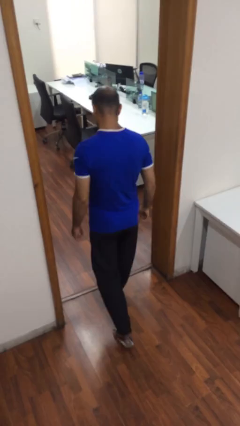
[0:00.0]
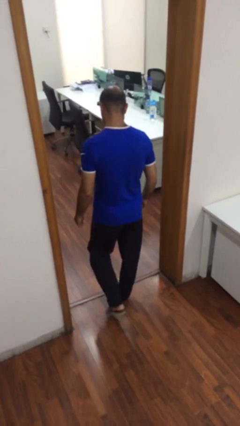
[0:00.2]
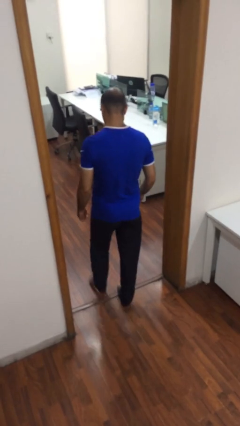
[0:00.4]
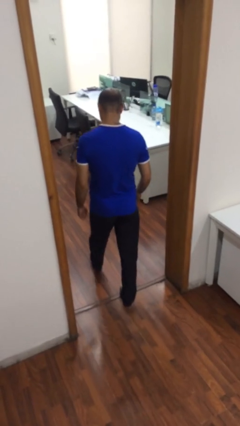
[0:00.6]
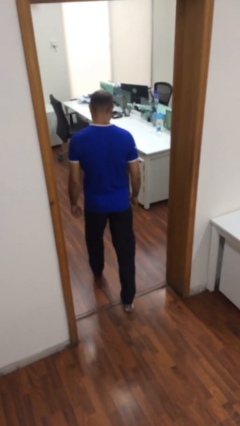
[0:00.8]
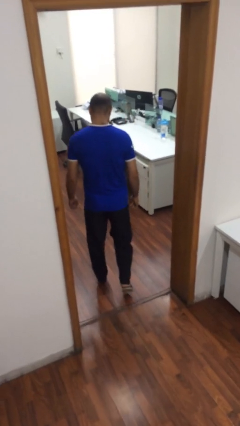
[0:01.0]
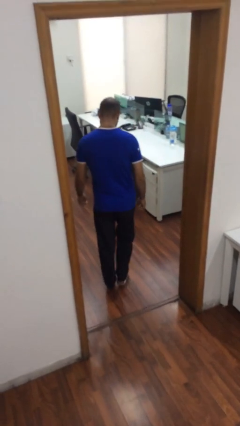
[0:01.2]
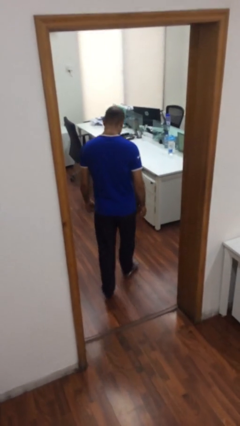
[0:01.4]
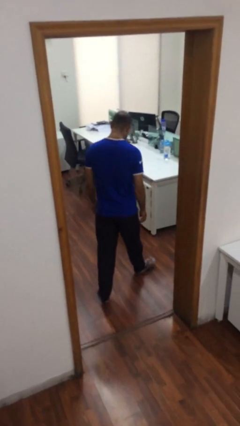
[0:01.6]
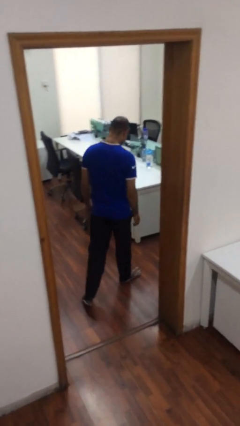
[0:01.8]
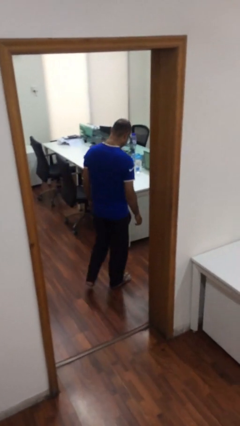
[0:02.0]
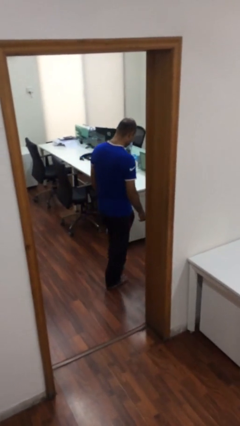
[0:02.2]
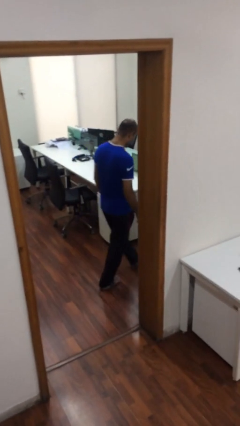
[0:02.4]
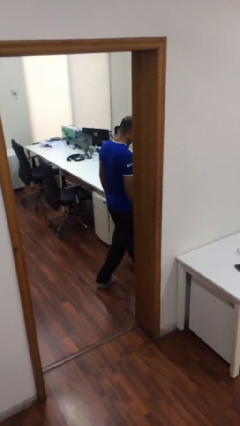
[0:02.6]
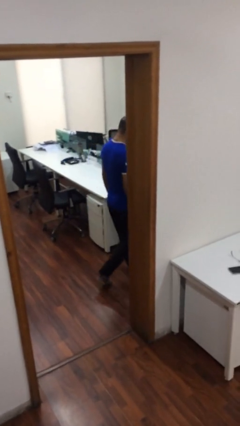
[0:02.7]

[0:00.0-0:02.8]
person exits scene through structure

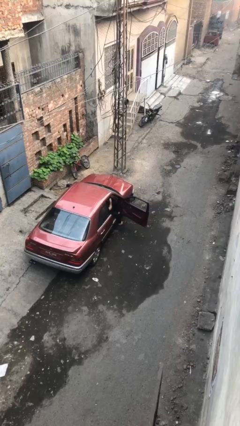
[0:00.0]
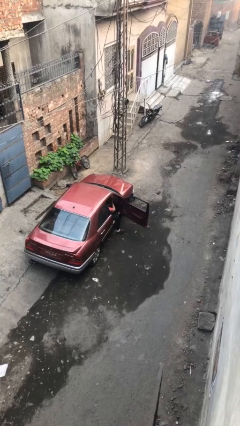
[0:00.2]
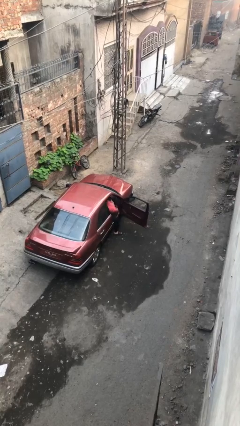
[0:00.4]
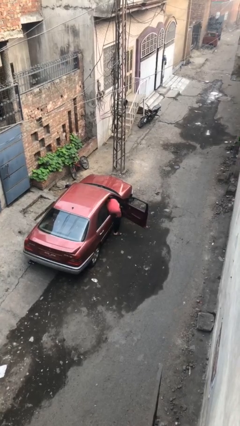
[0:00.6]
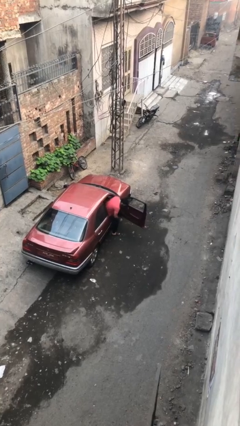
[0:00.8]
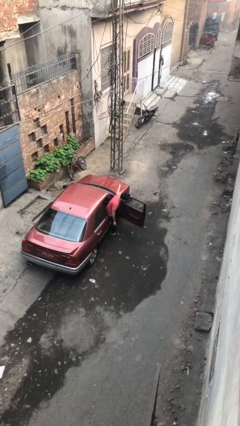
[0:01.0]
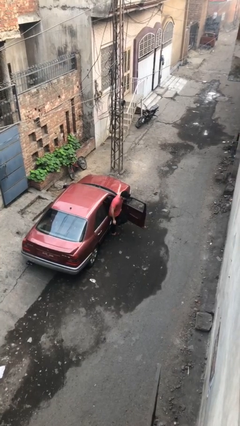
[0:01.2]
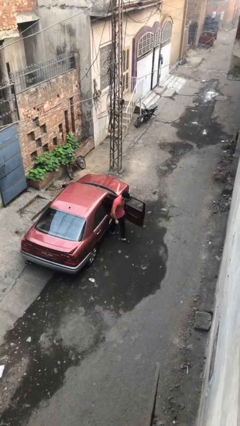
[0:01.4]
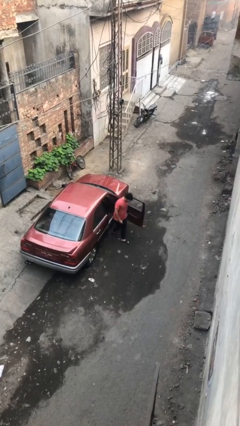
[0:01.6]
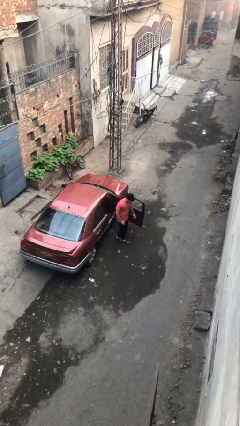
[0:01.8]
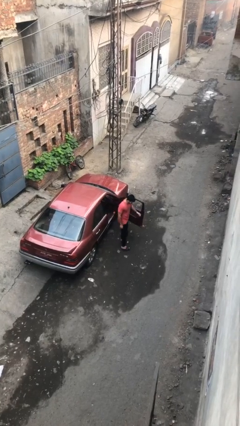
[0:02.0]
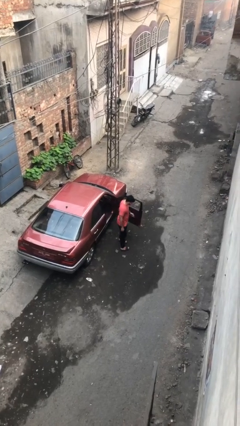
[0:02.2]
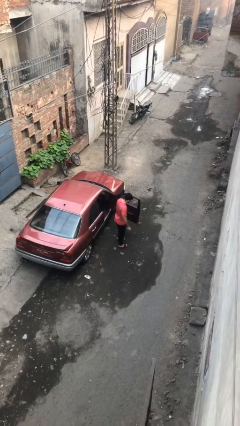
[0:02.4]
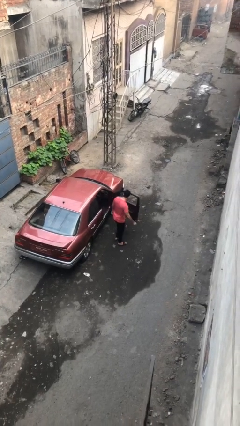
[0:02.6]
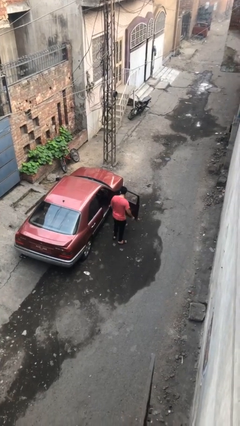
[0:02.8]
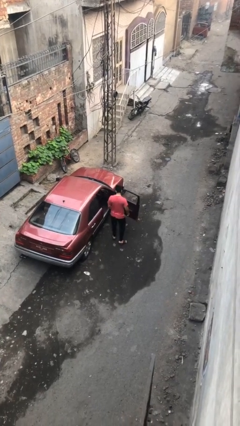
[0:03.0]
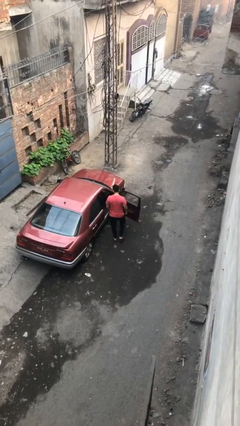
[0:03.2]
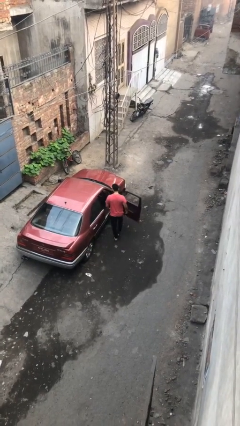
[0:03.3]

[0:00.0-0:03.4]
person exits car

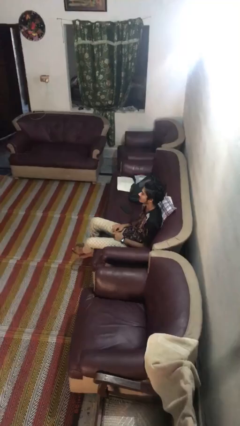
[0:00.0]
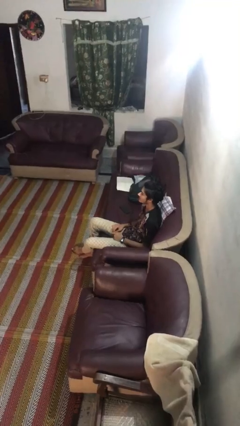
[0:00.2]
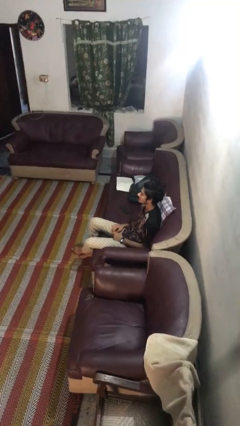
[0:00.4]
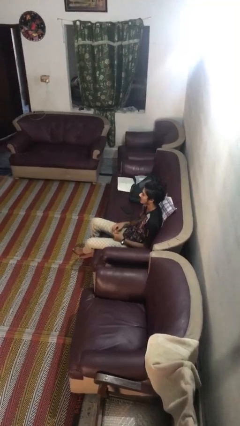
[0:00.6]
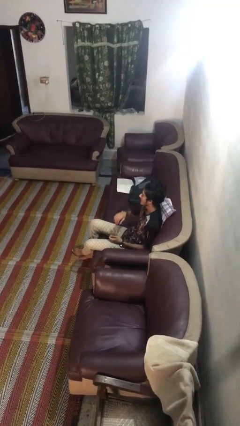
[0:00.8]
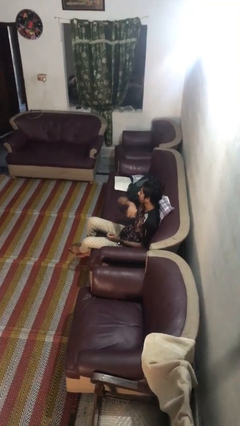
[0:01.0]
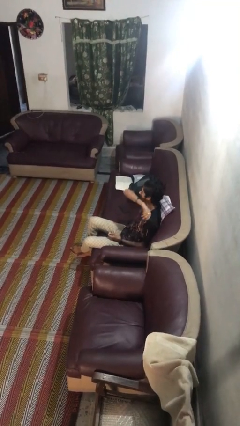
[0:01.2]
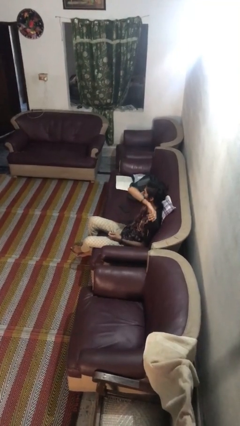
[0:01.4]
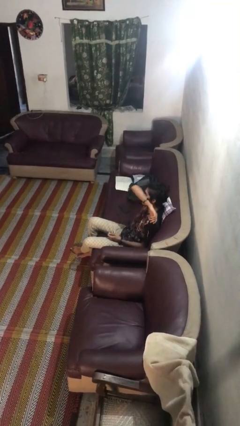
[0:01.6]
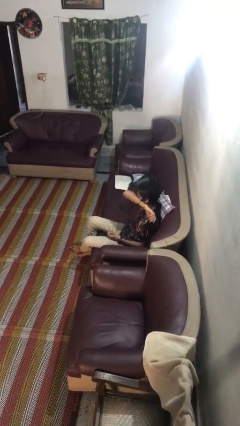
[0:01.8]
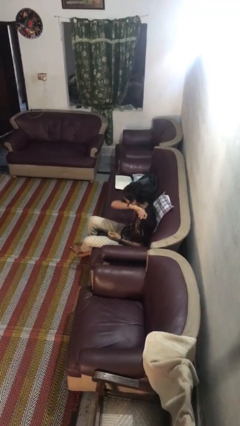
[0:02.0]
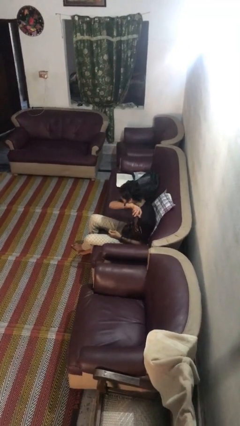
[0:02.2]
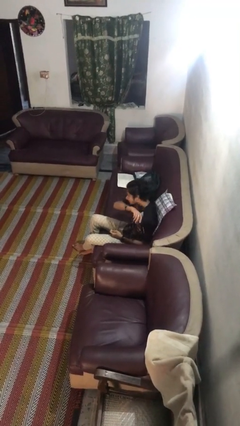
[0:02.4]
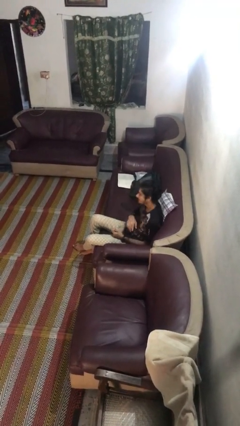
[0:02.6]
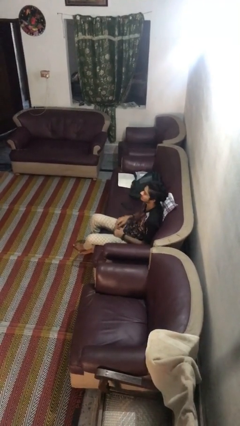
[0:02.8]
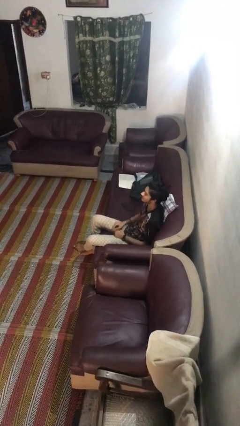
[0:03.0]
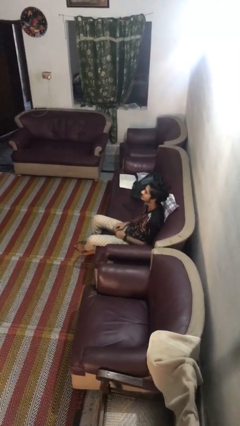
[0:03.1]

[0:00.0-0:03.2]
person sneezes into arm

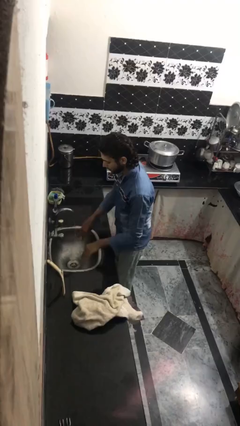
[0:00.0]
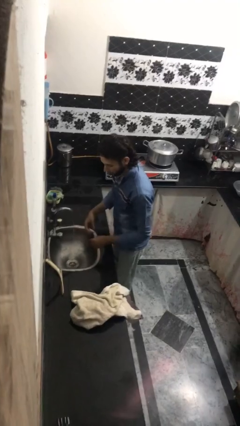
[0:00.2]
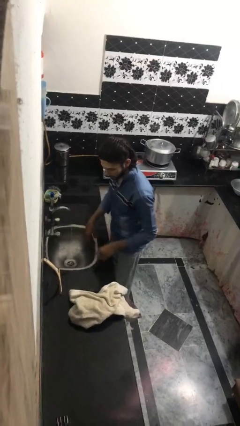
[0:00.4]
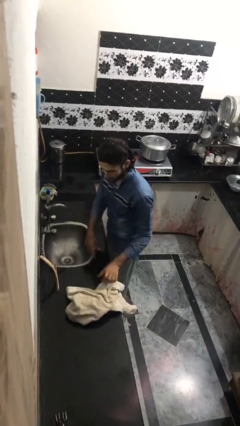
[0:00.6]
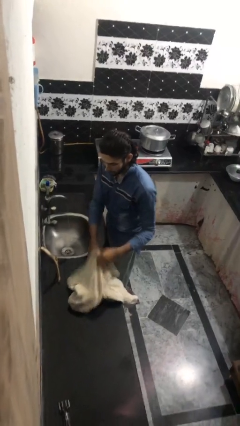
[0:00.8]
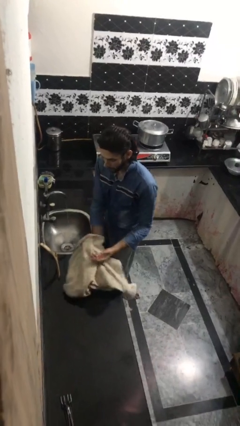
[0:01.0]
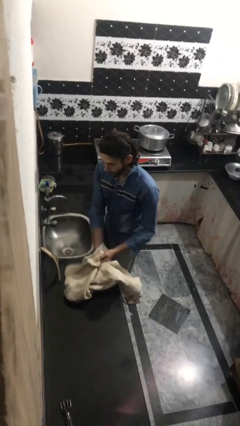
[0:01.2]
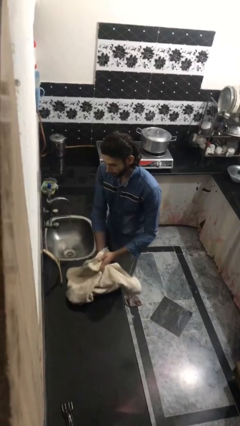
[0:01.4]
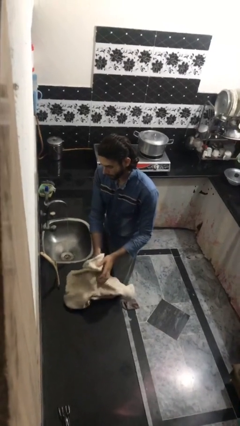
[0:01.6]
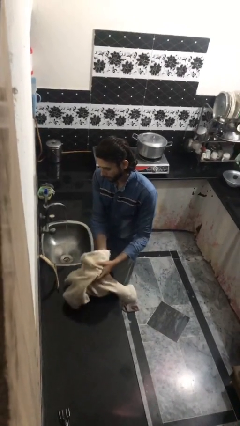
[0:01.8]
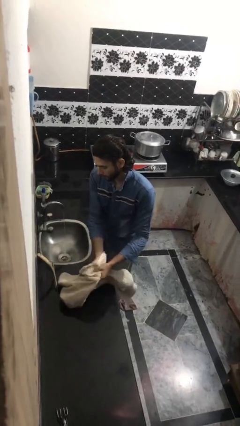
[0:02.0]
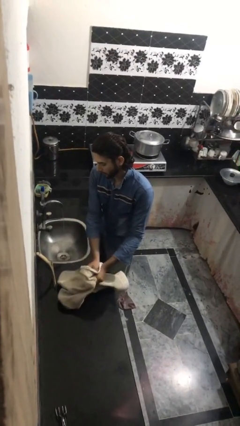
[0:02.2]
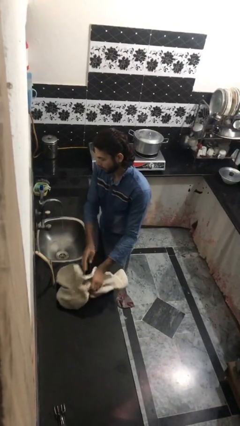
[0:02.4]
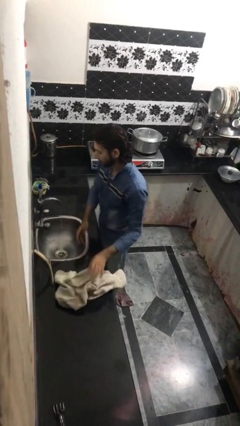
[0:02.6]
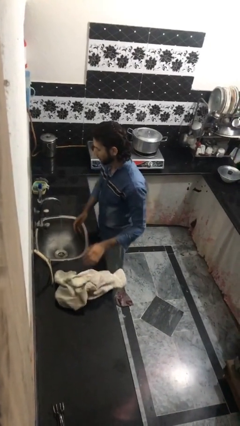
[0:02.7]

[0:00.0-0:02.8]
person dries hands with towel

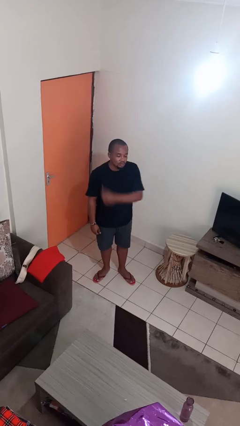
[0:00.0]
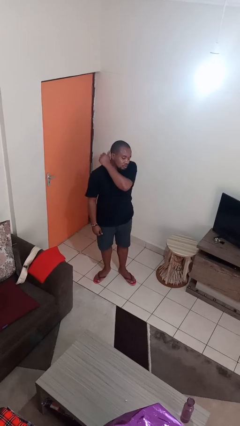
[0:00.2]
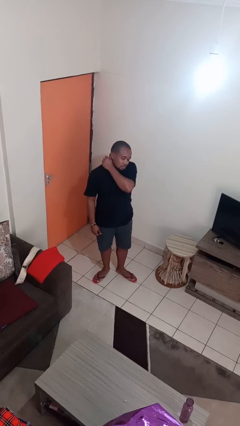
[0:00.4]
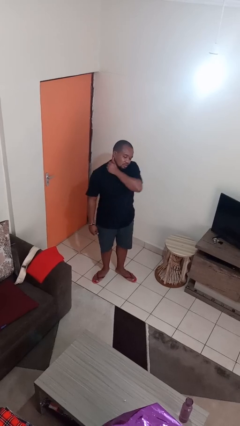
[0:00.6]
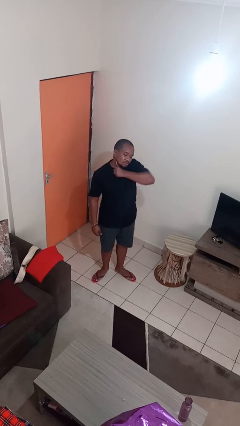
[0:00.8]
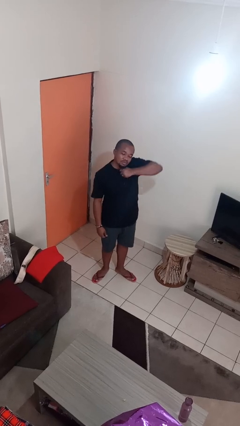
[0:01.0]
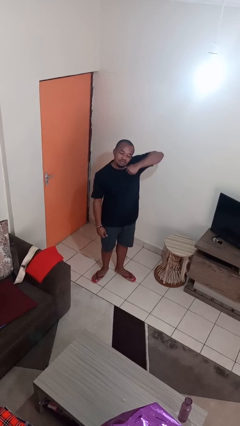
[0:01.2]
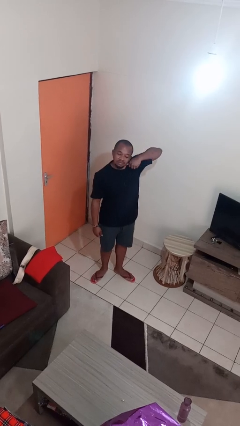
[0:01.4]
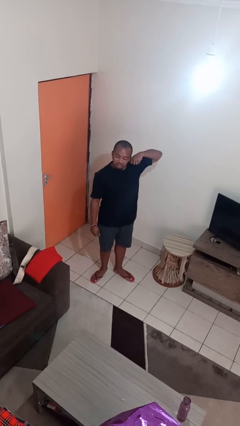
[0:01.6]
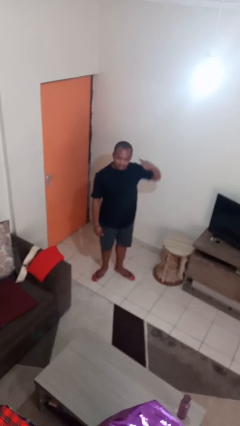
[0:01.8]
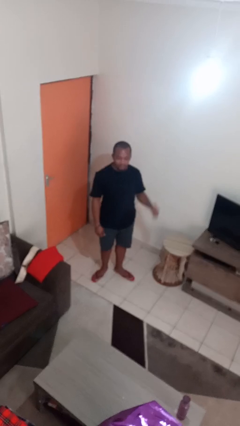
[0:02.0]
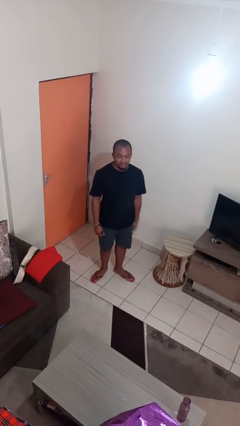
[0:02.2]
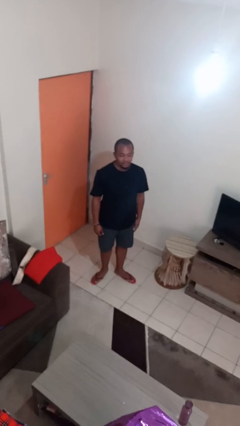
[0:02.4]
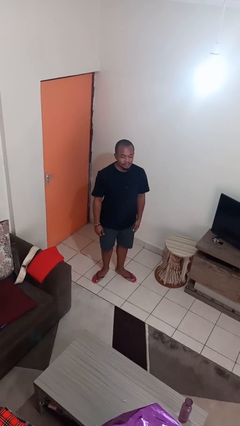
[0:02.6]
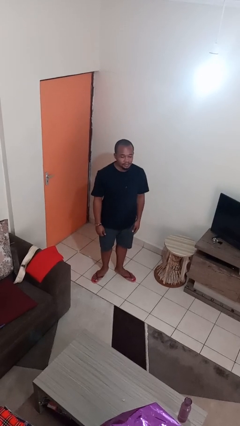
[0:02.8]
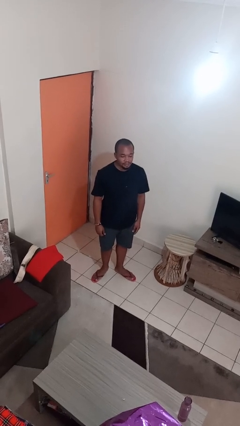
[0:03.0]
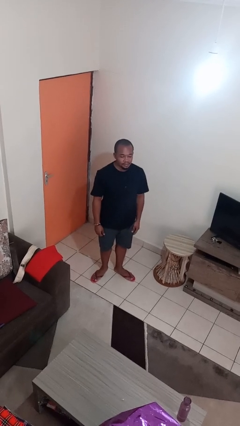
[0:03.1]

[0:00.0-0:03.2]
person gestures cut

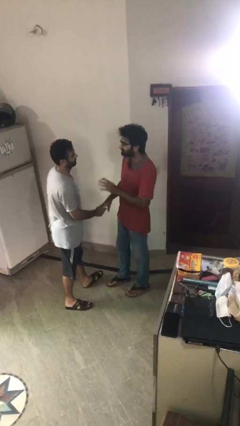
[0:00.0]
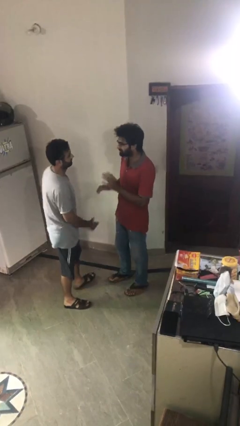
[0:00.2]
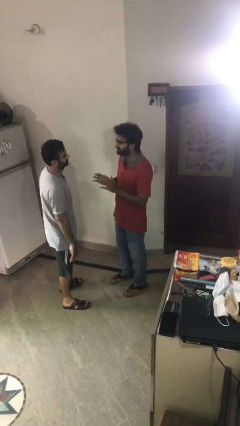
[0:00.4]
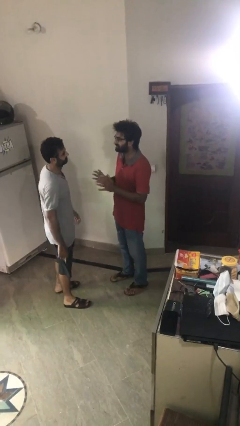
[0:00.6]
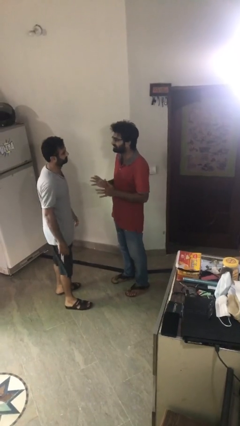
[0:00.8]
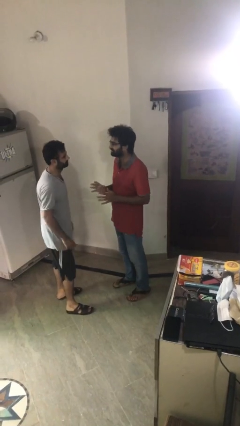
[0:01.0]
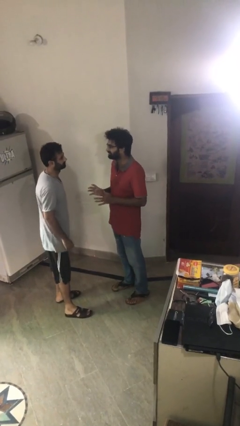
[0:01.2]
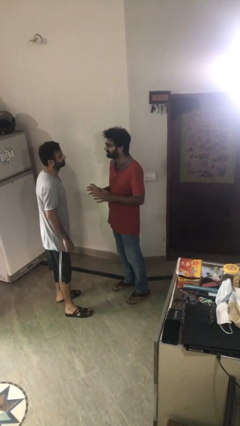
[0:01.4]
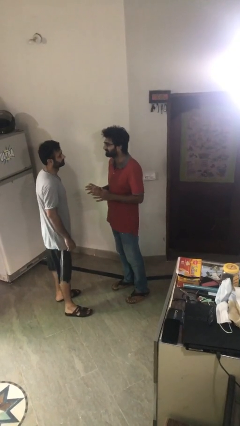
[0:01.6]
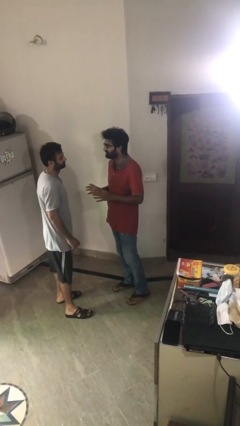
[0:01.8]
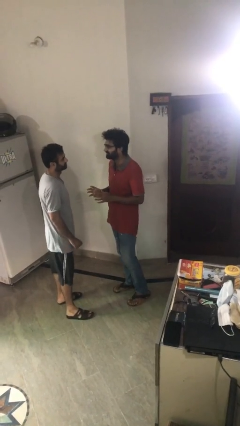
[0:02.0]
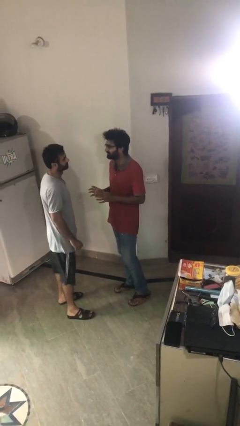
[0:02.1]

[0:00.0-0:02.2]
person talks to person
